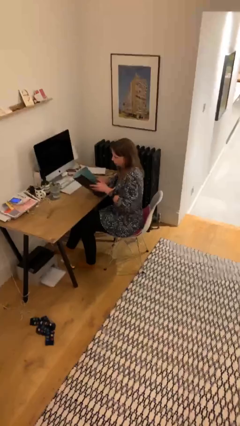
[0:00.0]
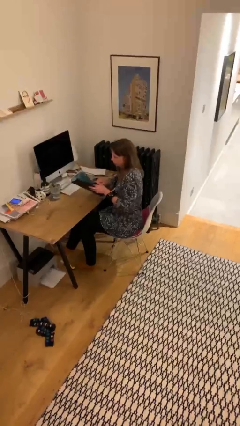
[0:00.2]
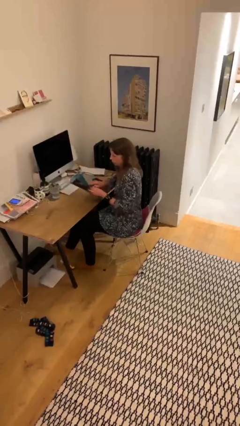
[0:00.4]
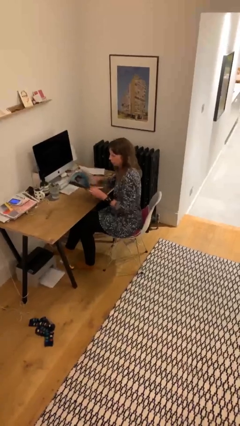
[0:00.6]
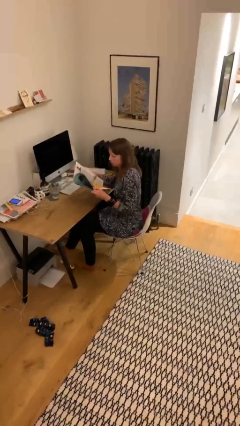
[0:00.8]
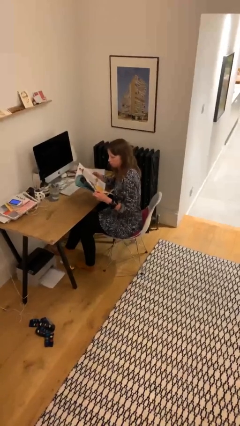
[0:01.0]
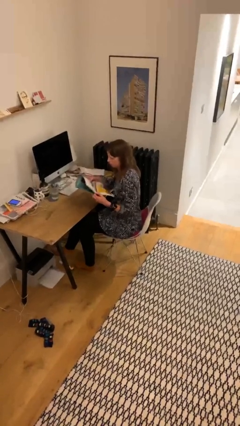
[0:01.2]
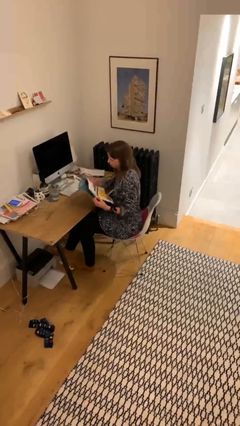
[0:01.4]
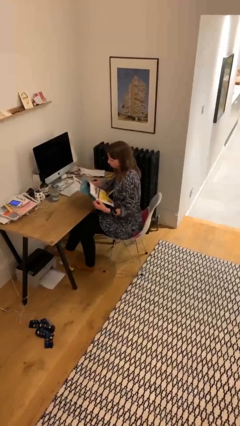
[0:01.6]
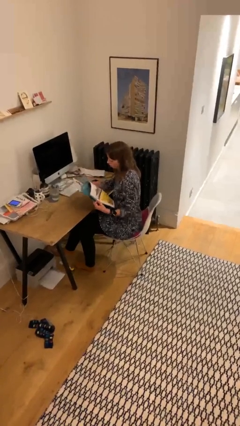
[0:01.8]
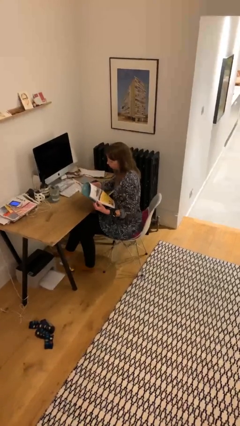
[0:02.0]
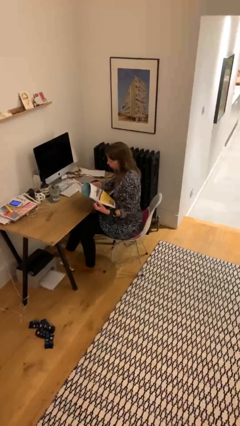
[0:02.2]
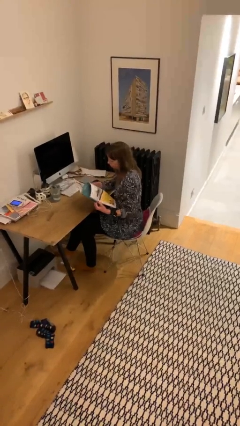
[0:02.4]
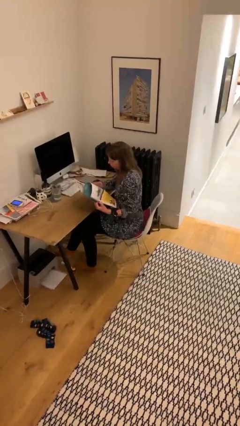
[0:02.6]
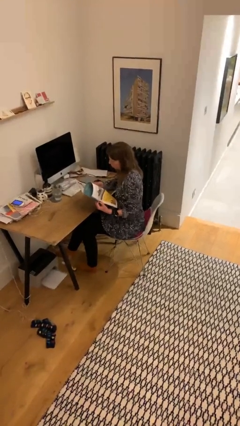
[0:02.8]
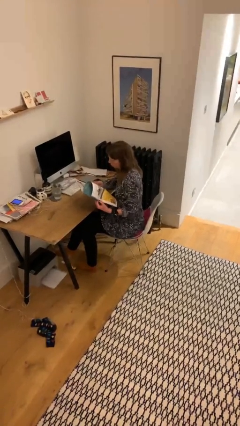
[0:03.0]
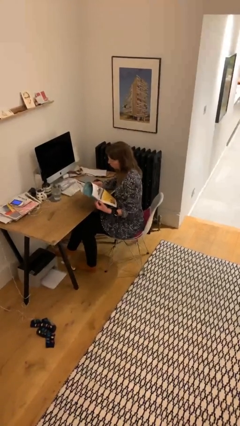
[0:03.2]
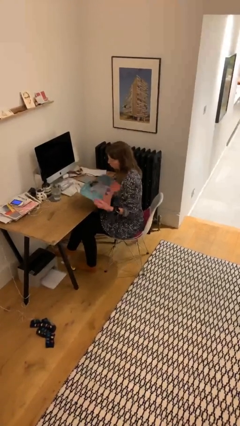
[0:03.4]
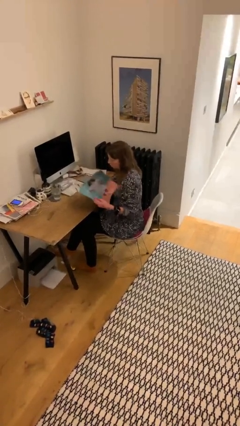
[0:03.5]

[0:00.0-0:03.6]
person reads document

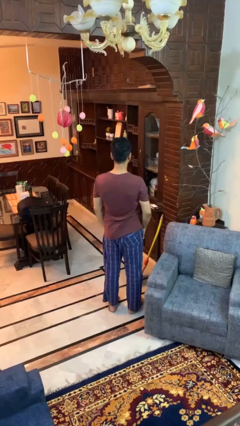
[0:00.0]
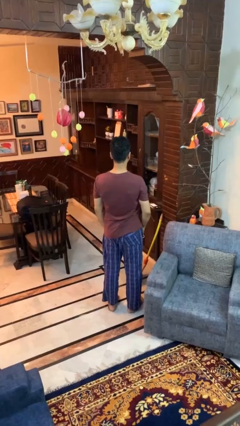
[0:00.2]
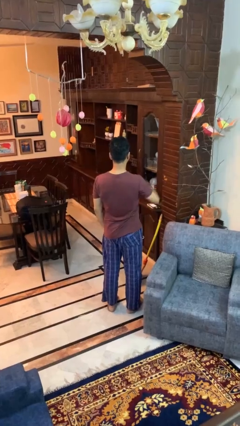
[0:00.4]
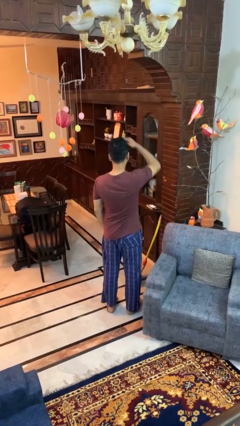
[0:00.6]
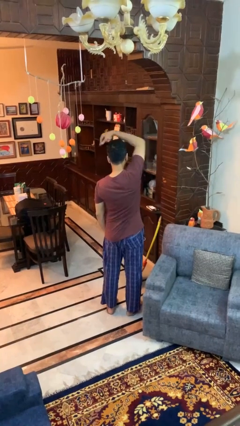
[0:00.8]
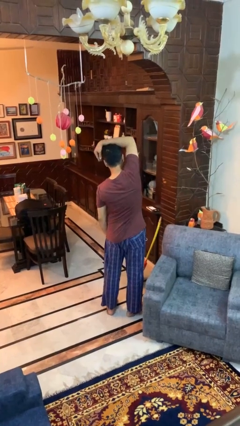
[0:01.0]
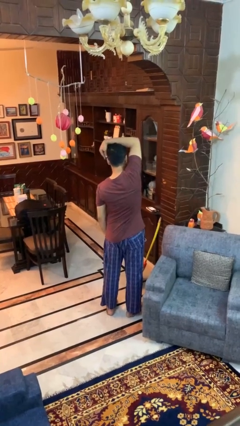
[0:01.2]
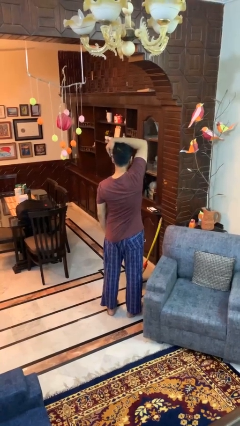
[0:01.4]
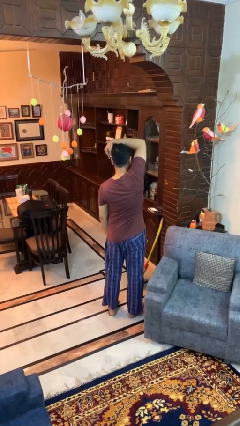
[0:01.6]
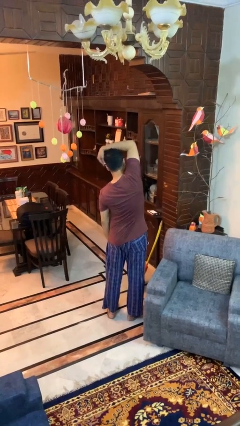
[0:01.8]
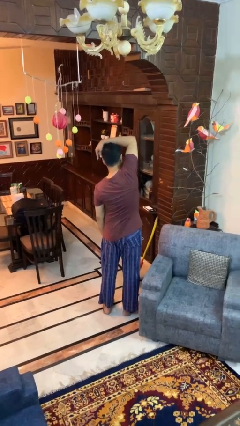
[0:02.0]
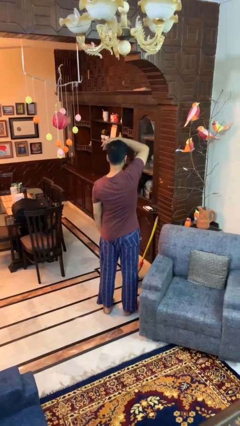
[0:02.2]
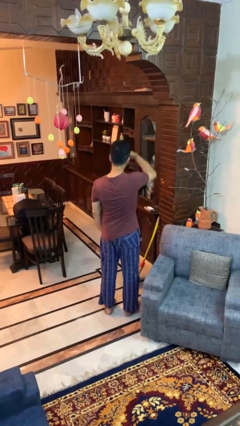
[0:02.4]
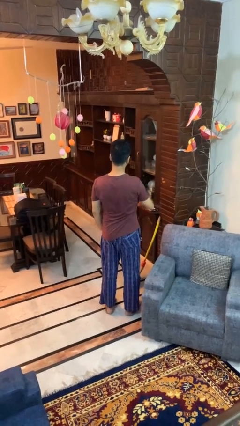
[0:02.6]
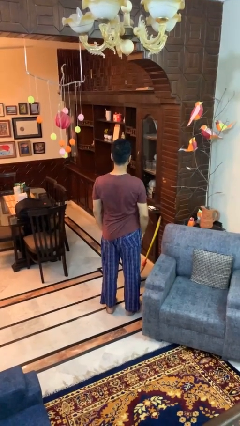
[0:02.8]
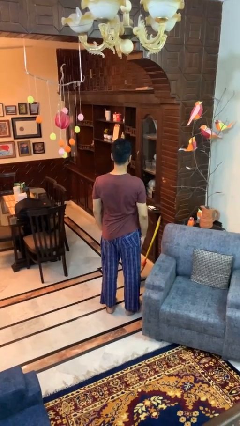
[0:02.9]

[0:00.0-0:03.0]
person stretches arms over head

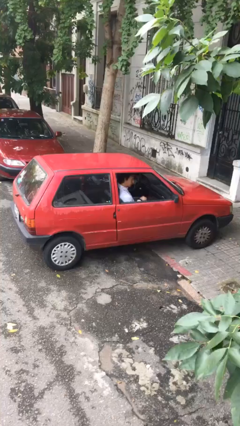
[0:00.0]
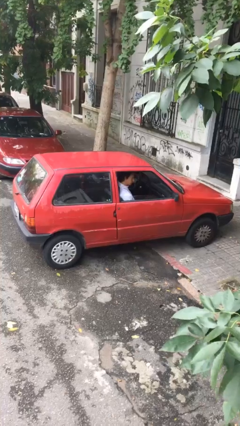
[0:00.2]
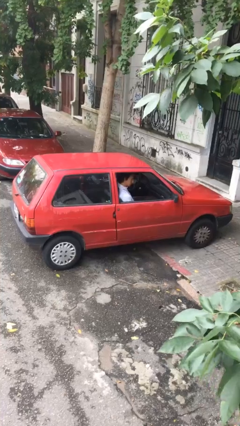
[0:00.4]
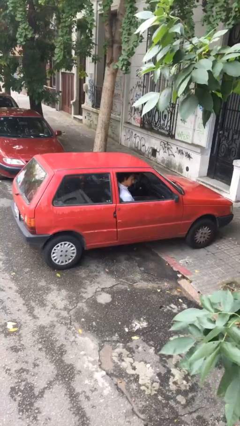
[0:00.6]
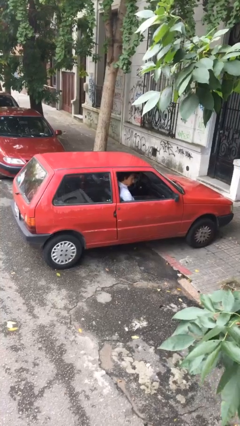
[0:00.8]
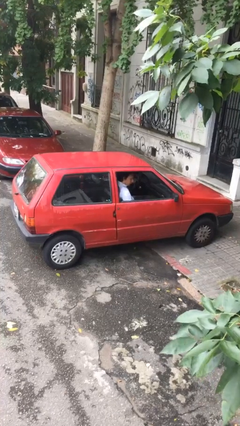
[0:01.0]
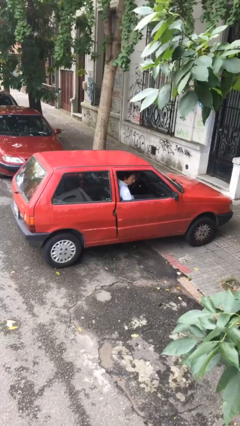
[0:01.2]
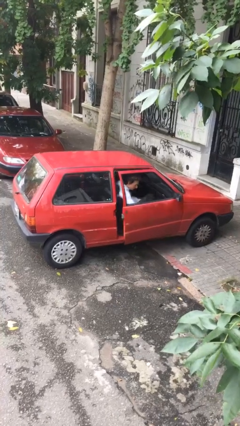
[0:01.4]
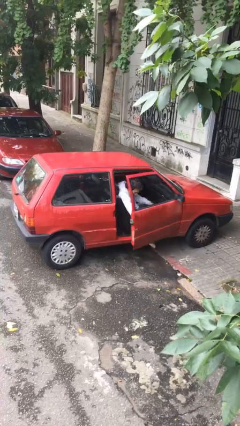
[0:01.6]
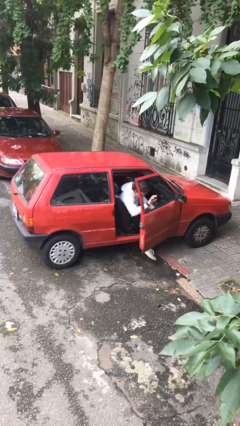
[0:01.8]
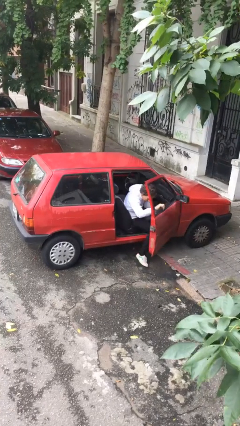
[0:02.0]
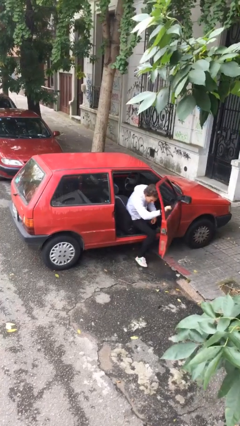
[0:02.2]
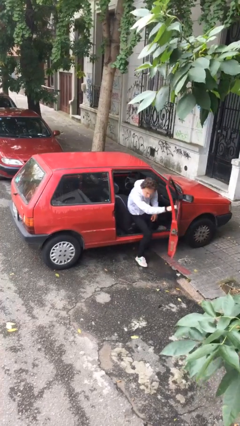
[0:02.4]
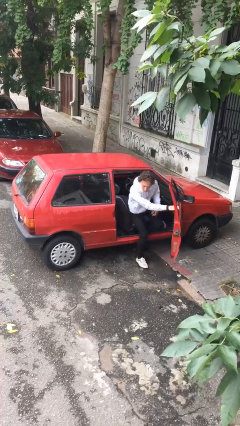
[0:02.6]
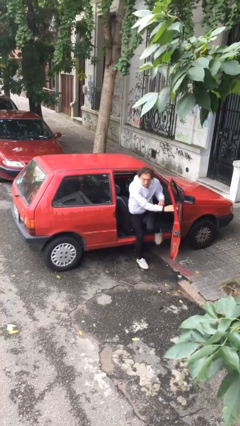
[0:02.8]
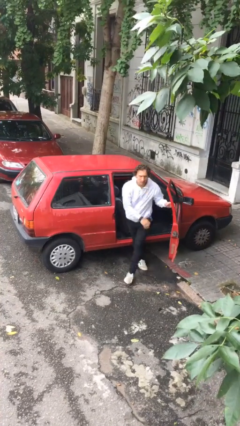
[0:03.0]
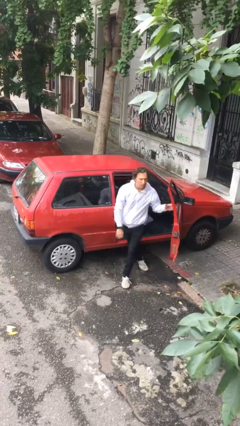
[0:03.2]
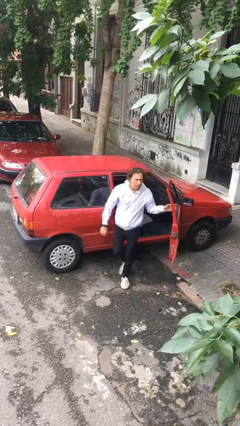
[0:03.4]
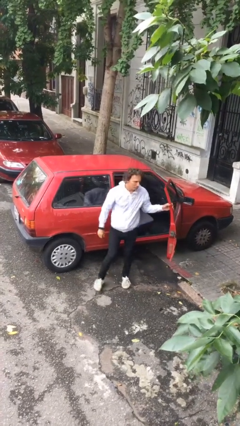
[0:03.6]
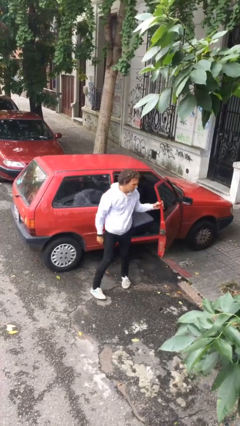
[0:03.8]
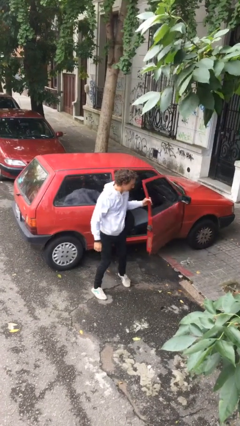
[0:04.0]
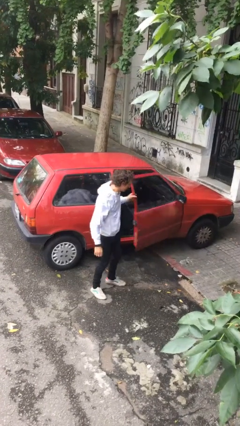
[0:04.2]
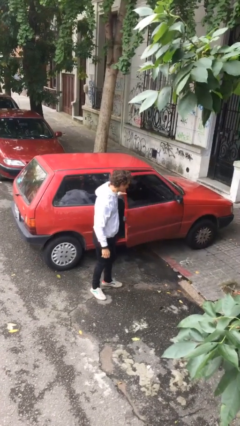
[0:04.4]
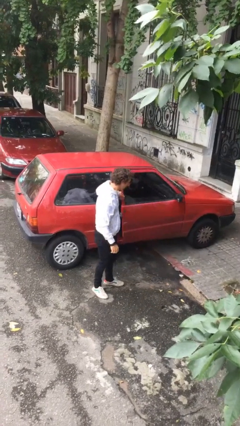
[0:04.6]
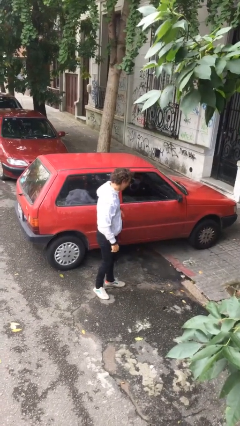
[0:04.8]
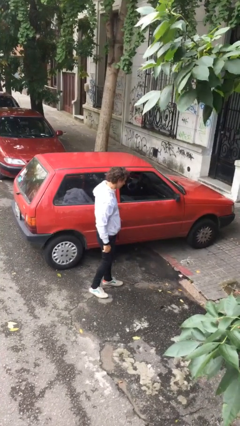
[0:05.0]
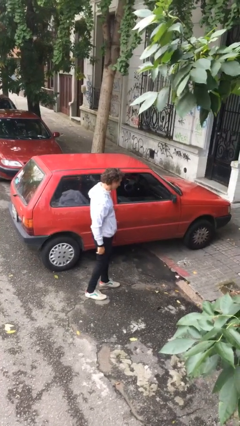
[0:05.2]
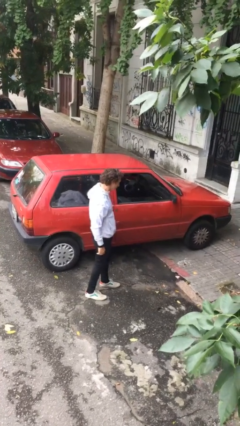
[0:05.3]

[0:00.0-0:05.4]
car drops off person

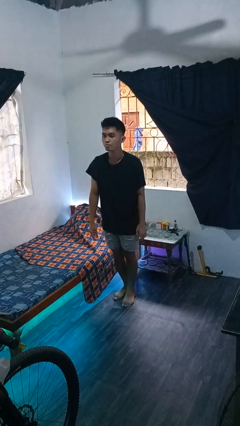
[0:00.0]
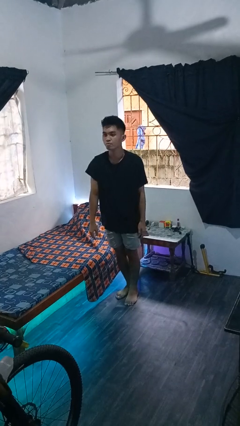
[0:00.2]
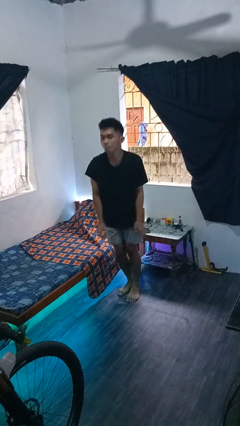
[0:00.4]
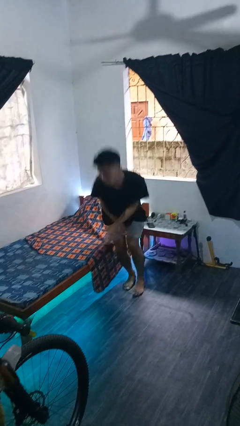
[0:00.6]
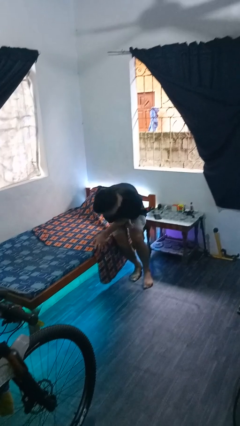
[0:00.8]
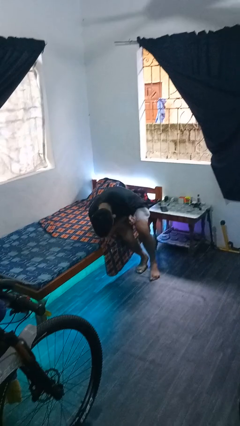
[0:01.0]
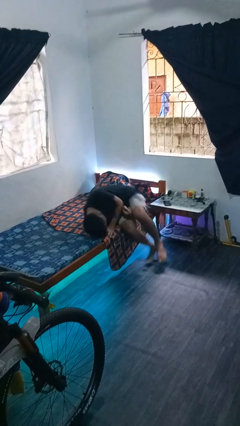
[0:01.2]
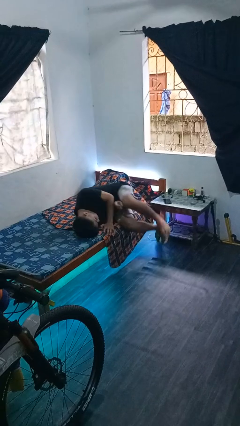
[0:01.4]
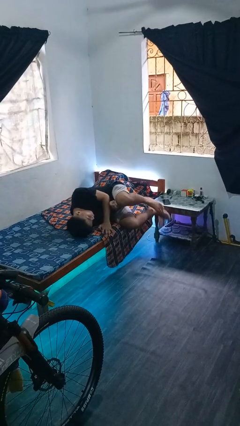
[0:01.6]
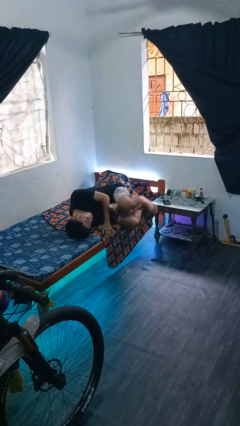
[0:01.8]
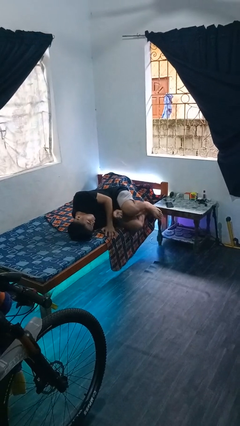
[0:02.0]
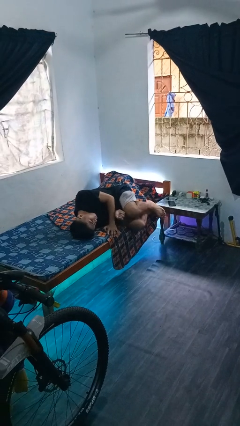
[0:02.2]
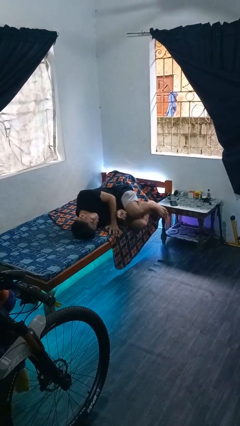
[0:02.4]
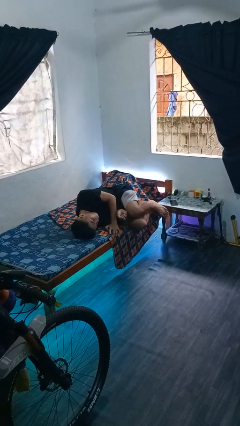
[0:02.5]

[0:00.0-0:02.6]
person lies down on bed

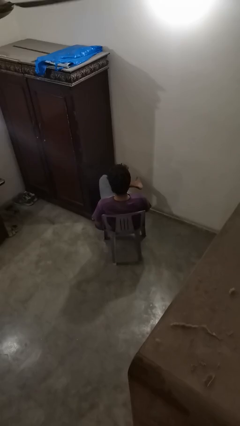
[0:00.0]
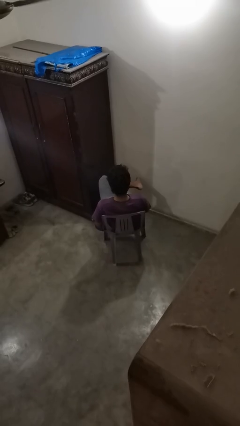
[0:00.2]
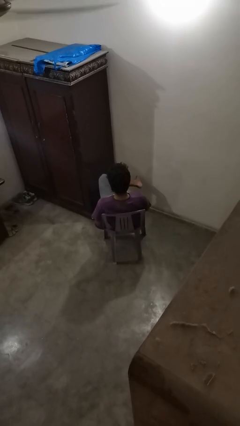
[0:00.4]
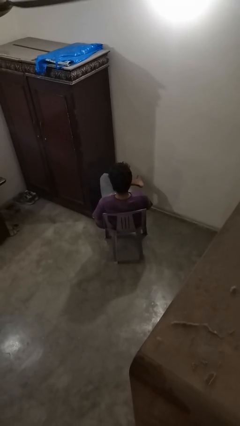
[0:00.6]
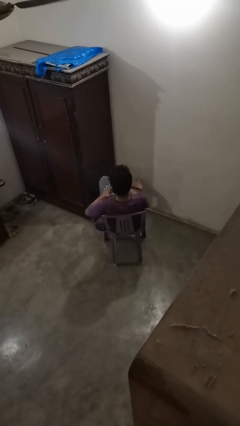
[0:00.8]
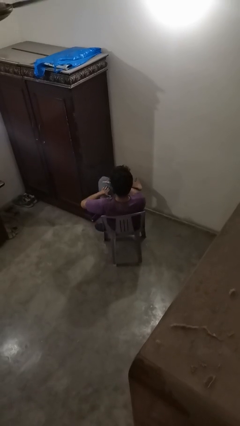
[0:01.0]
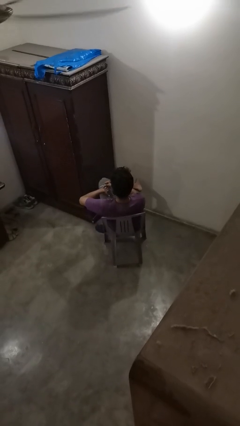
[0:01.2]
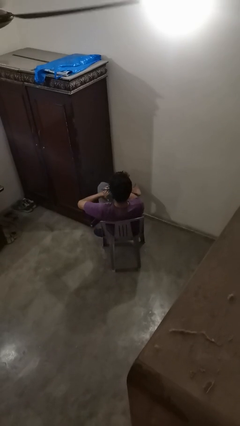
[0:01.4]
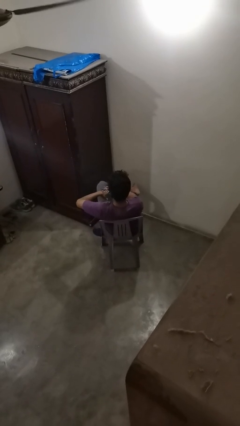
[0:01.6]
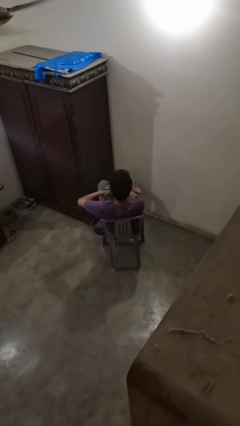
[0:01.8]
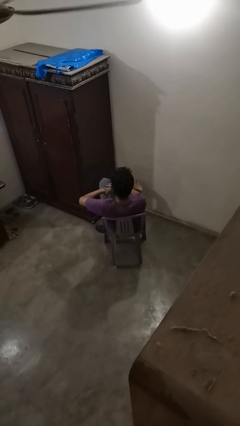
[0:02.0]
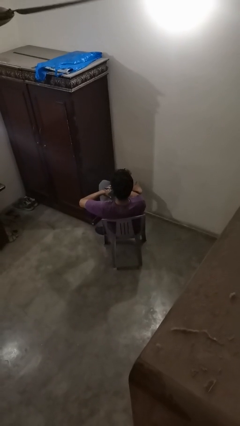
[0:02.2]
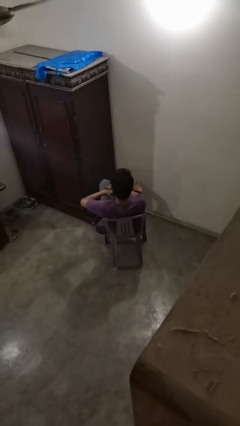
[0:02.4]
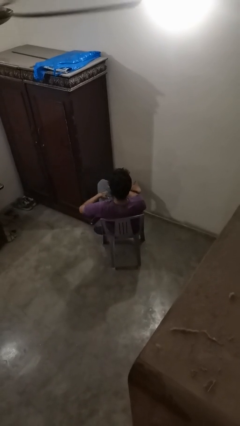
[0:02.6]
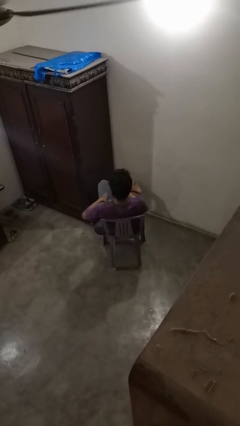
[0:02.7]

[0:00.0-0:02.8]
person files fingernails
